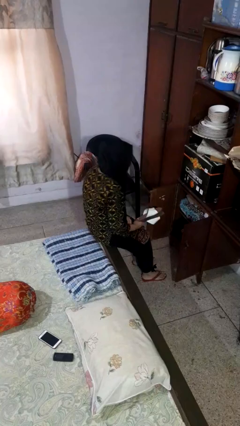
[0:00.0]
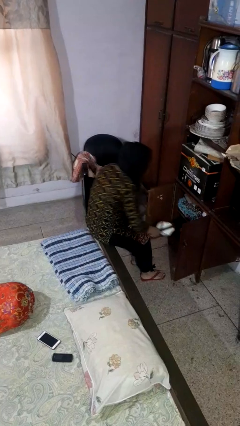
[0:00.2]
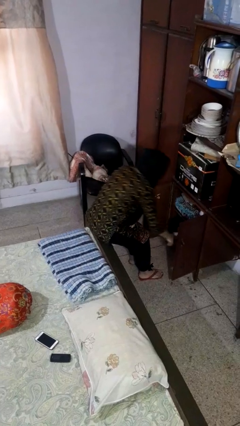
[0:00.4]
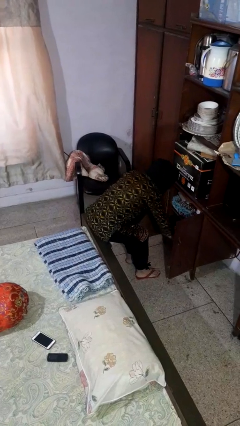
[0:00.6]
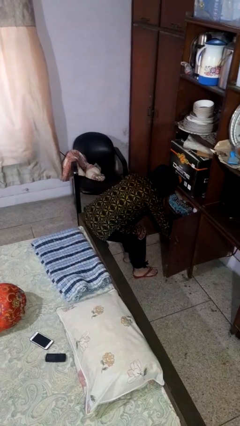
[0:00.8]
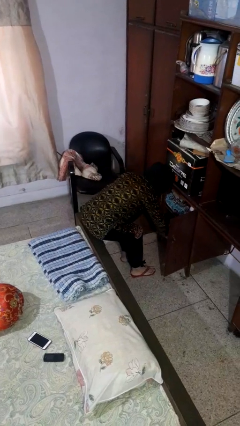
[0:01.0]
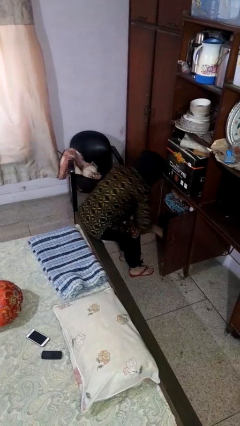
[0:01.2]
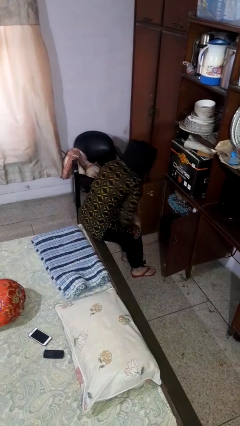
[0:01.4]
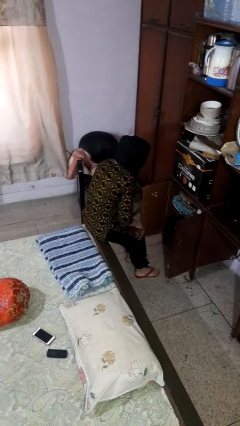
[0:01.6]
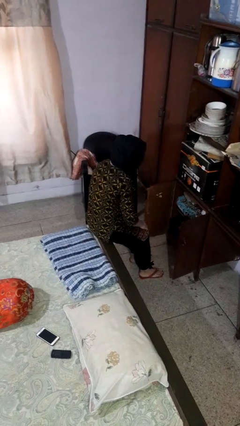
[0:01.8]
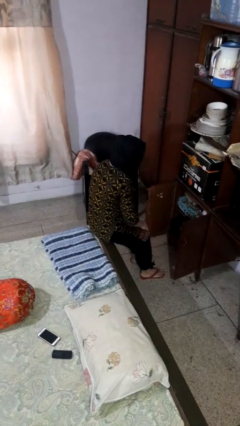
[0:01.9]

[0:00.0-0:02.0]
person puts object in cabinet

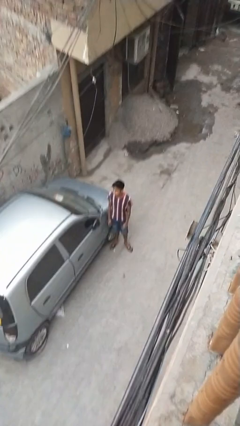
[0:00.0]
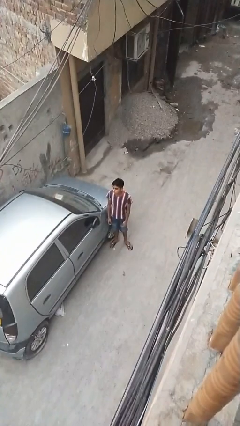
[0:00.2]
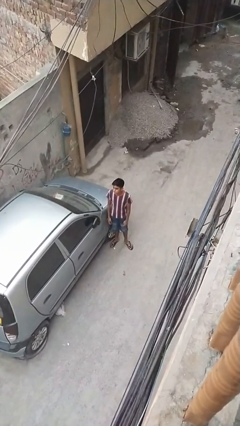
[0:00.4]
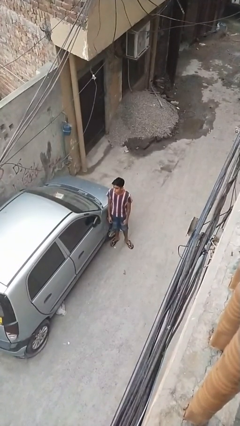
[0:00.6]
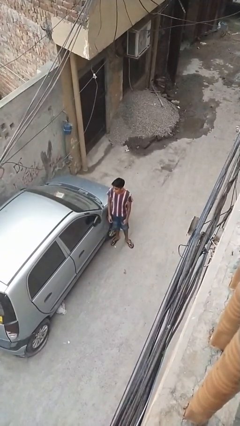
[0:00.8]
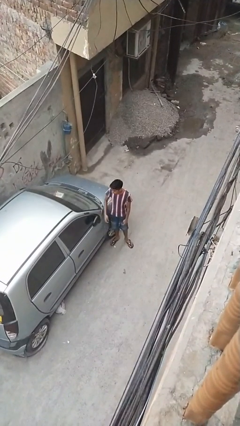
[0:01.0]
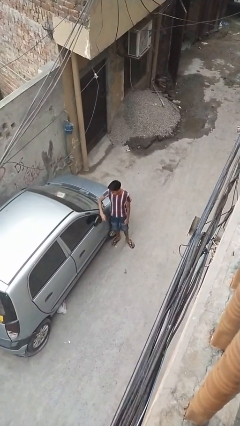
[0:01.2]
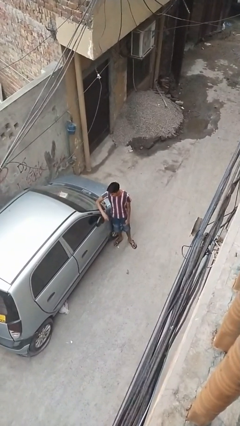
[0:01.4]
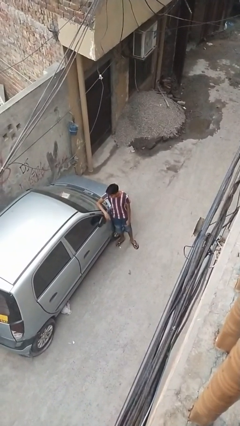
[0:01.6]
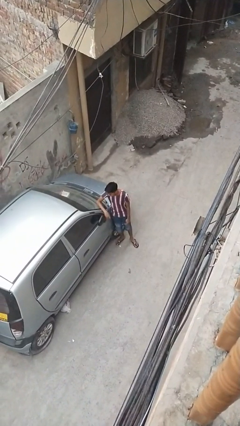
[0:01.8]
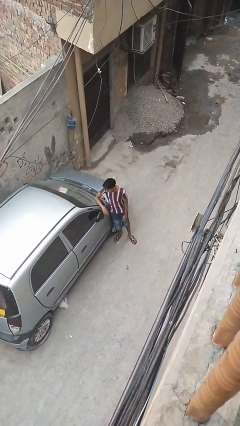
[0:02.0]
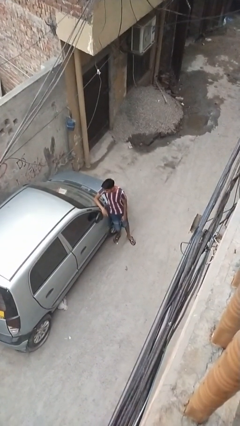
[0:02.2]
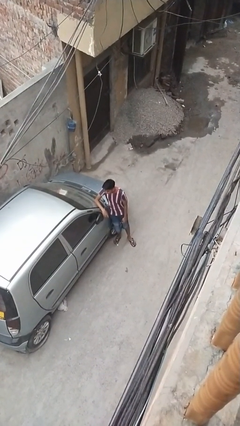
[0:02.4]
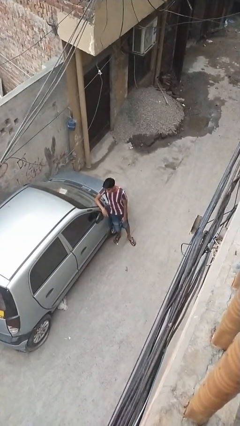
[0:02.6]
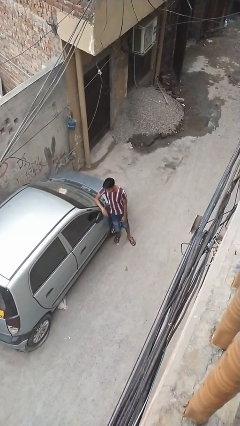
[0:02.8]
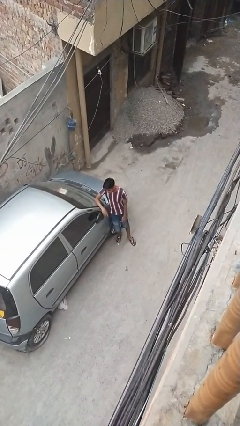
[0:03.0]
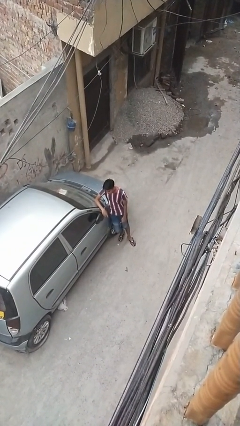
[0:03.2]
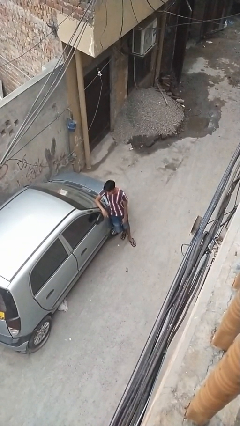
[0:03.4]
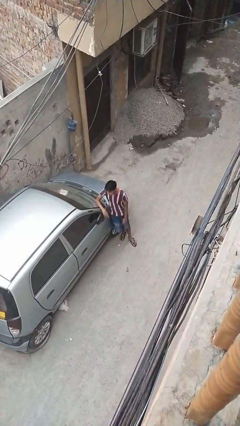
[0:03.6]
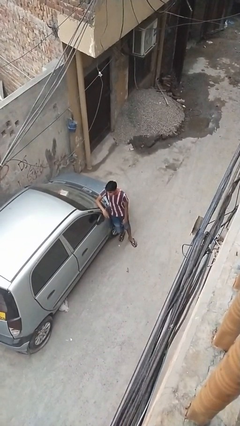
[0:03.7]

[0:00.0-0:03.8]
person leans against car

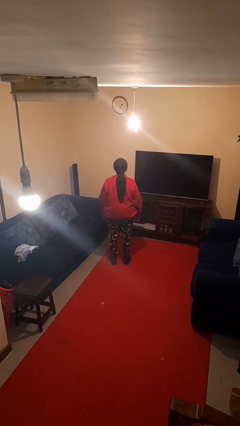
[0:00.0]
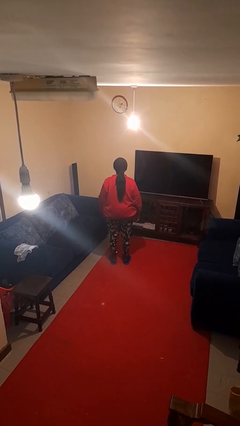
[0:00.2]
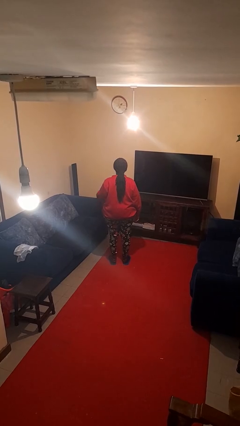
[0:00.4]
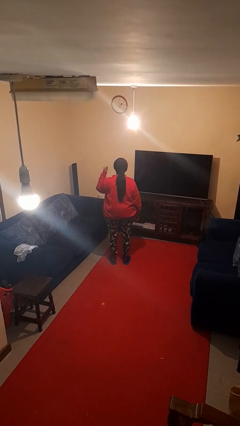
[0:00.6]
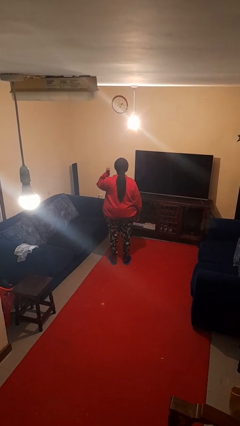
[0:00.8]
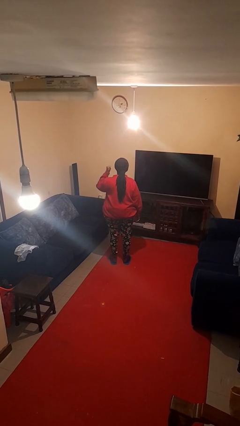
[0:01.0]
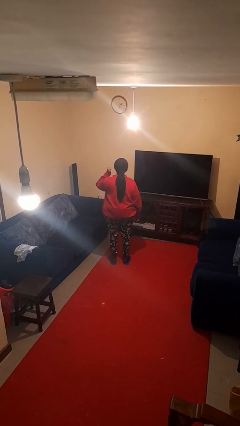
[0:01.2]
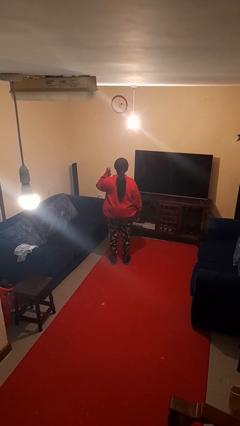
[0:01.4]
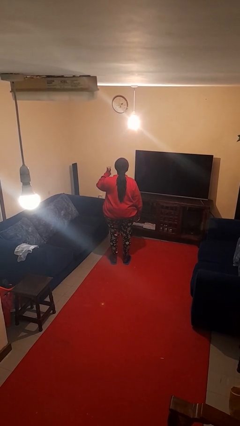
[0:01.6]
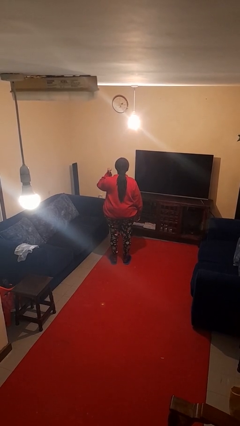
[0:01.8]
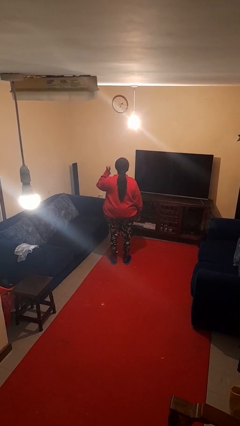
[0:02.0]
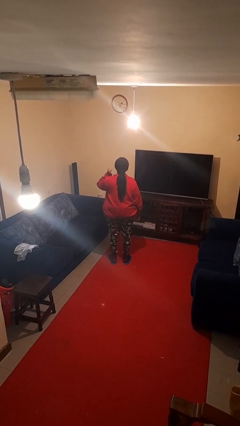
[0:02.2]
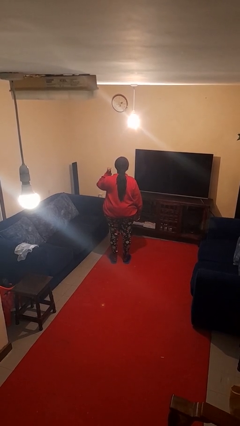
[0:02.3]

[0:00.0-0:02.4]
person gestures behind me

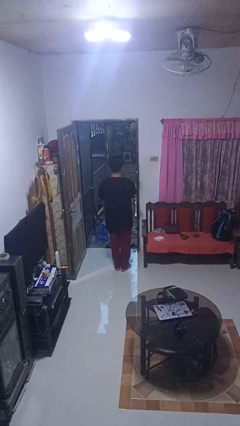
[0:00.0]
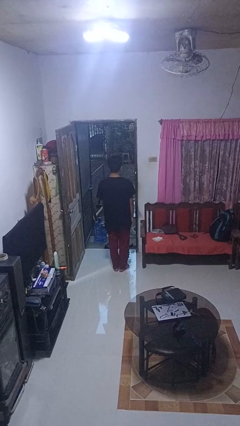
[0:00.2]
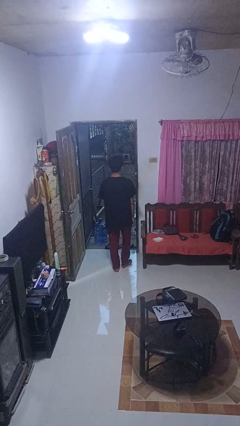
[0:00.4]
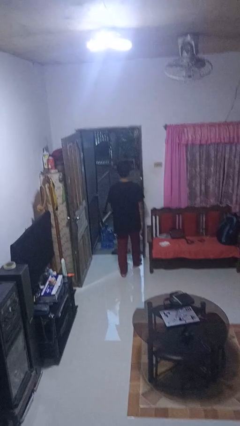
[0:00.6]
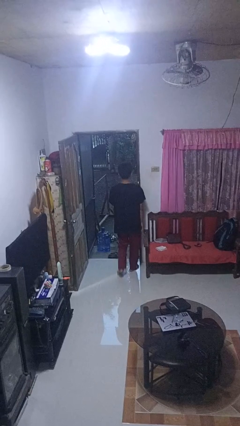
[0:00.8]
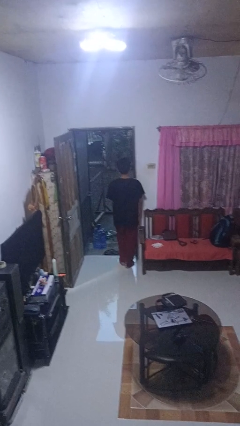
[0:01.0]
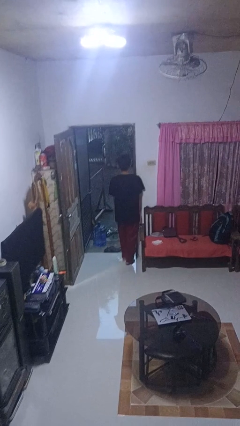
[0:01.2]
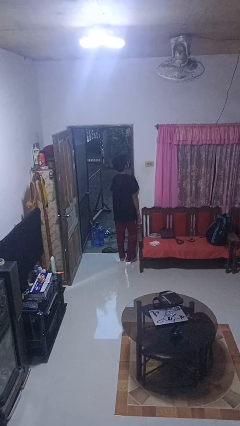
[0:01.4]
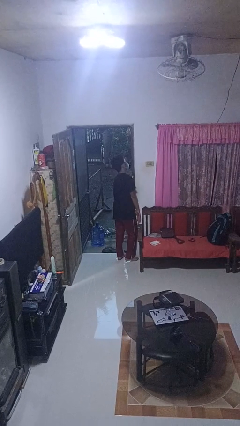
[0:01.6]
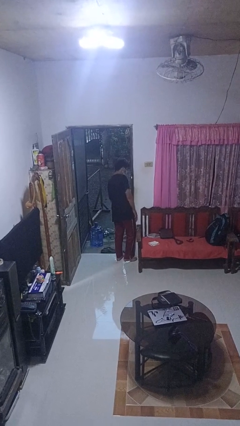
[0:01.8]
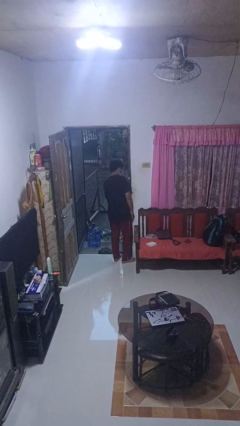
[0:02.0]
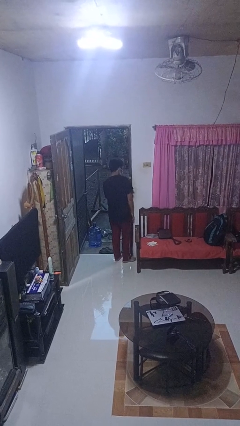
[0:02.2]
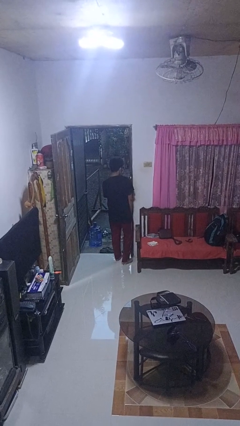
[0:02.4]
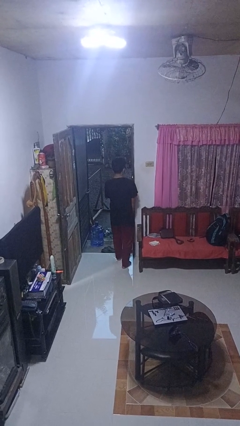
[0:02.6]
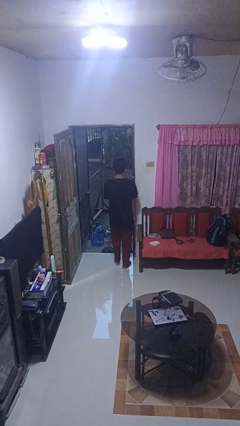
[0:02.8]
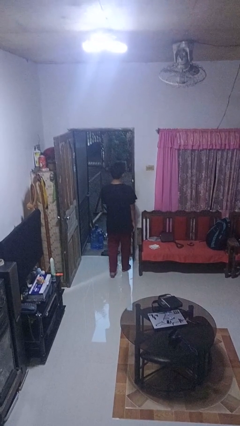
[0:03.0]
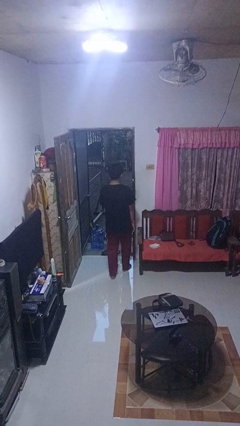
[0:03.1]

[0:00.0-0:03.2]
person bumps into wall

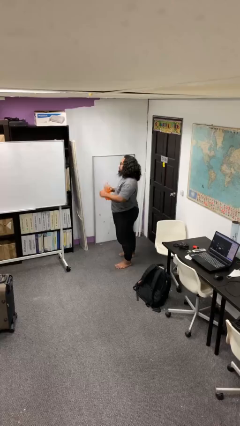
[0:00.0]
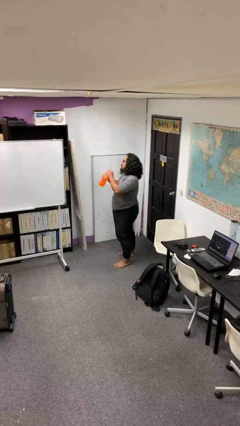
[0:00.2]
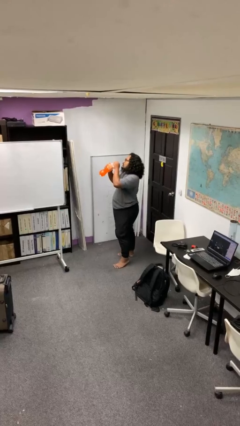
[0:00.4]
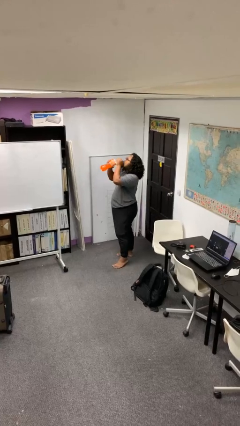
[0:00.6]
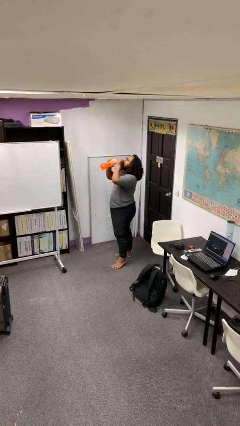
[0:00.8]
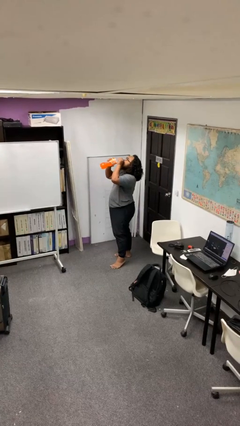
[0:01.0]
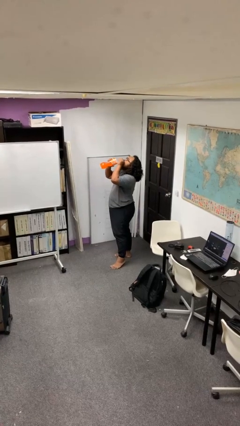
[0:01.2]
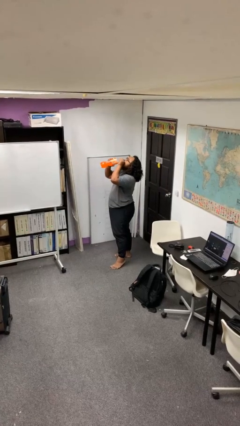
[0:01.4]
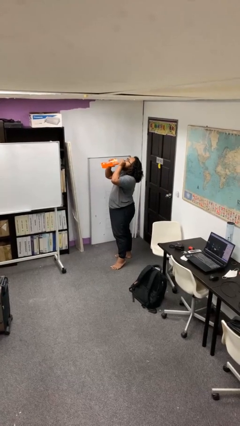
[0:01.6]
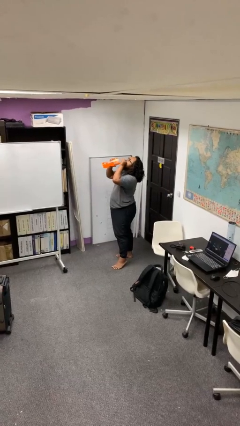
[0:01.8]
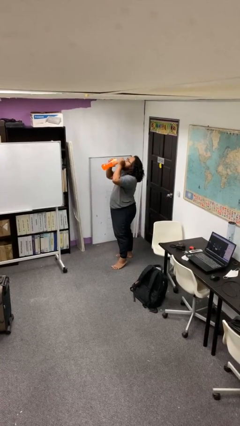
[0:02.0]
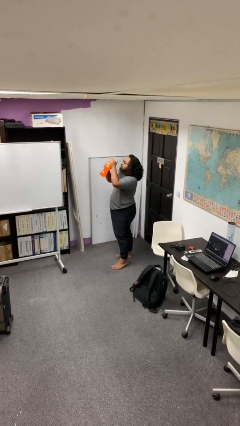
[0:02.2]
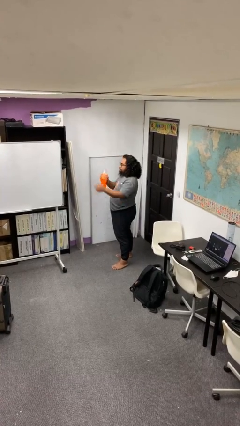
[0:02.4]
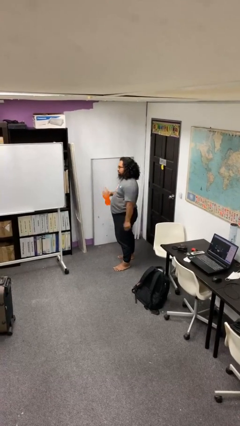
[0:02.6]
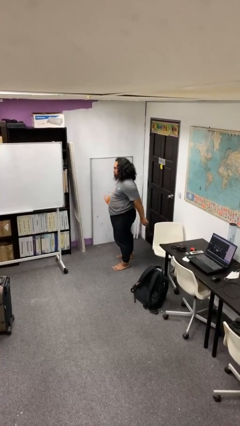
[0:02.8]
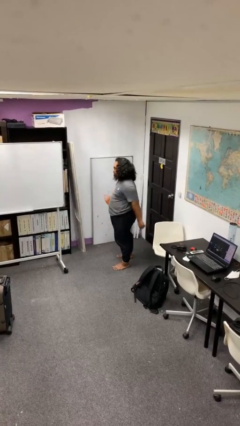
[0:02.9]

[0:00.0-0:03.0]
person drinks from bottle

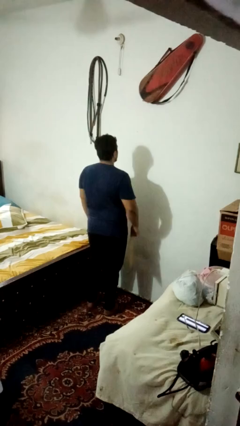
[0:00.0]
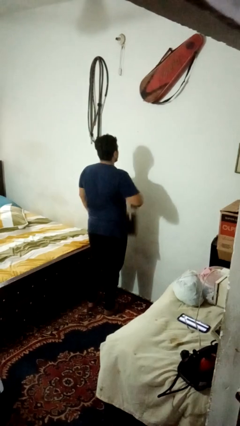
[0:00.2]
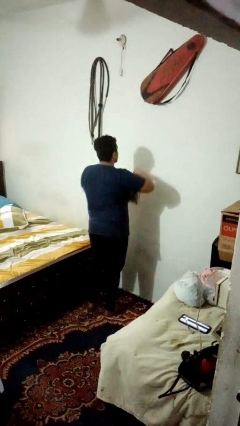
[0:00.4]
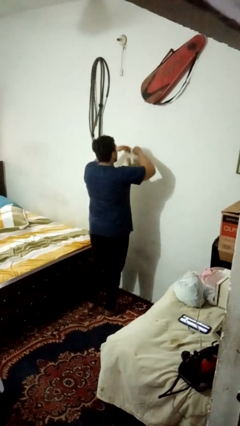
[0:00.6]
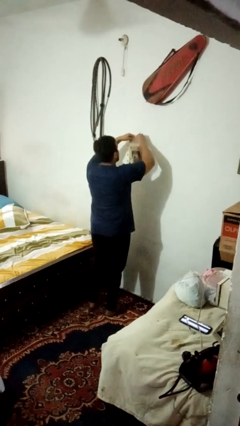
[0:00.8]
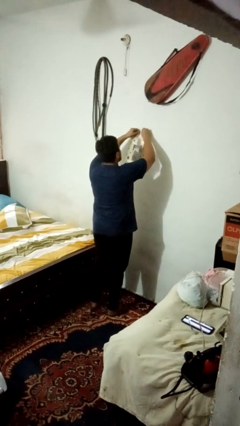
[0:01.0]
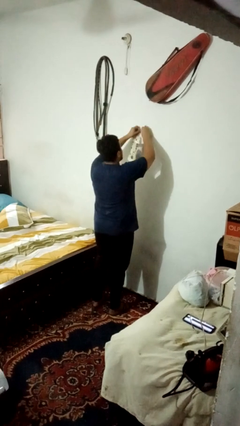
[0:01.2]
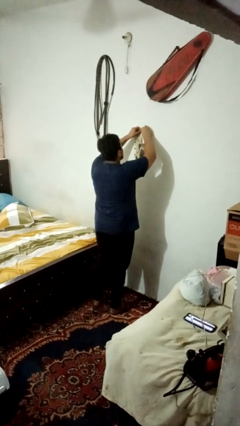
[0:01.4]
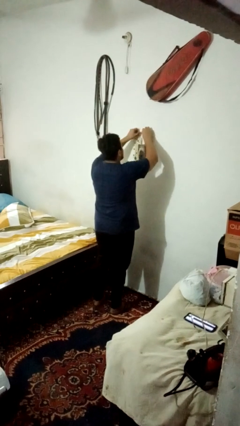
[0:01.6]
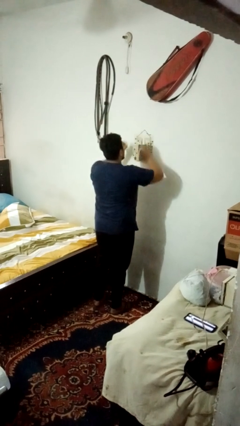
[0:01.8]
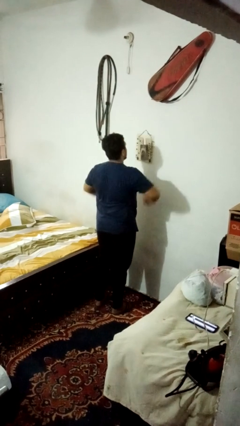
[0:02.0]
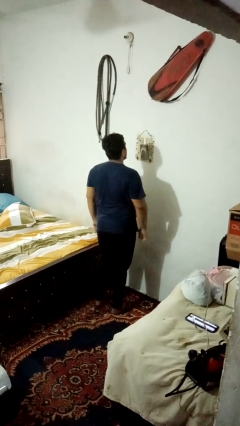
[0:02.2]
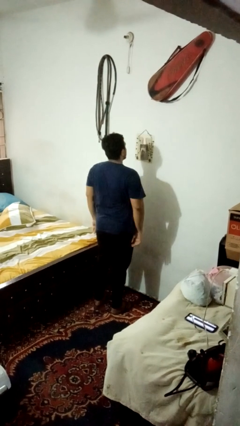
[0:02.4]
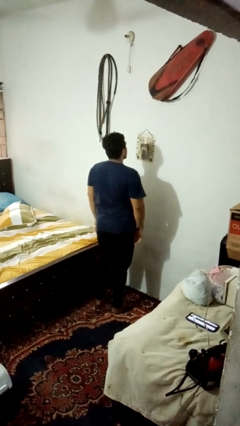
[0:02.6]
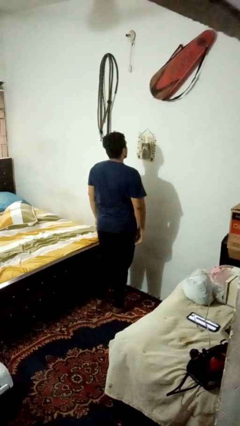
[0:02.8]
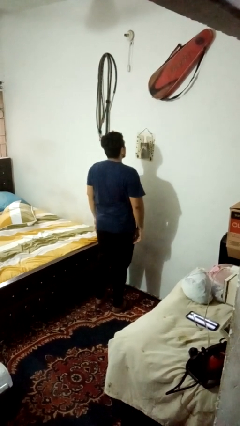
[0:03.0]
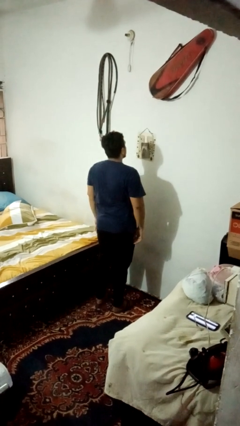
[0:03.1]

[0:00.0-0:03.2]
person puts up picture frame
